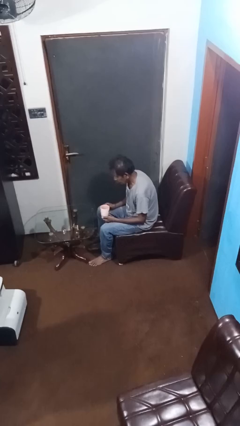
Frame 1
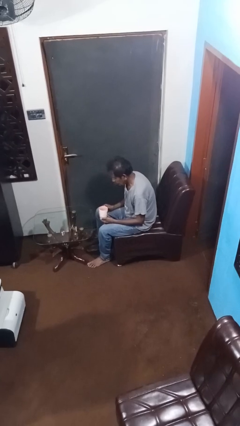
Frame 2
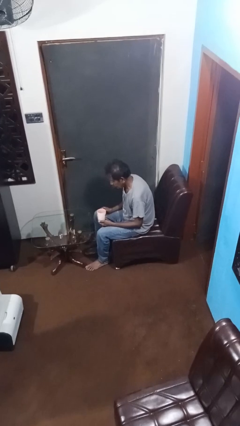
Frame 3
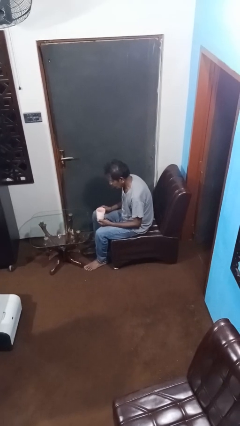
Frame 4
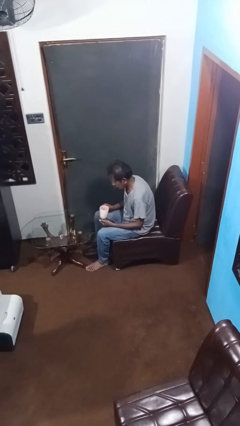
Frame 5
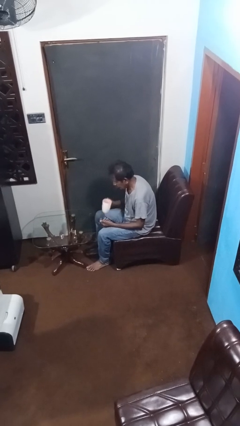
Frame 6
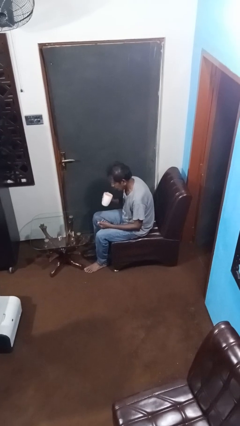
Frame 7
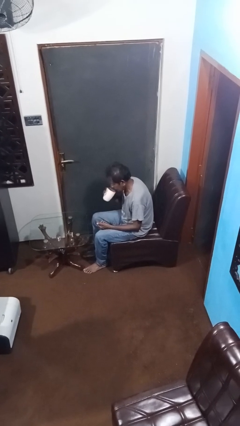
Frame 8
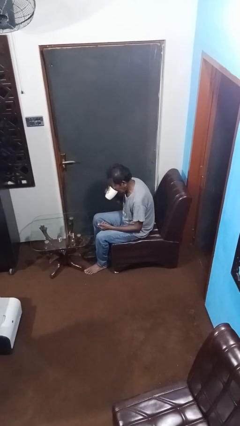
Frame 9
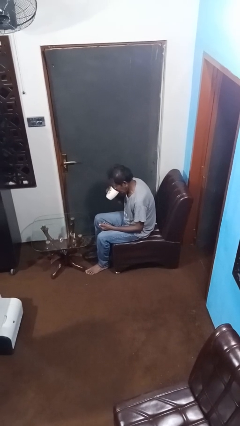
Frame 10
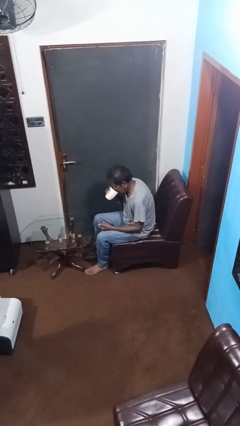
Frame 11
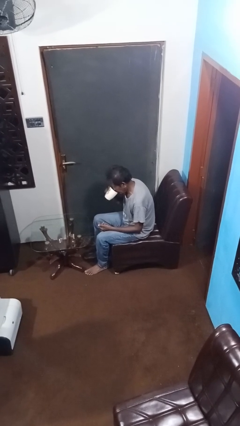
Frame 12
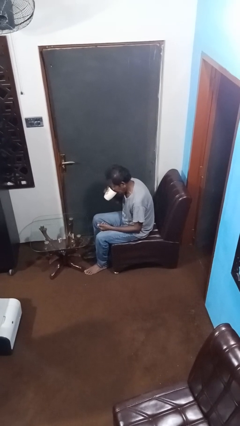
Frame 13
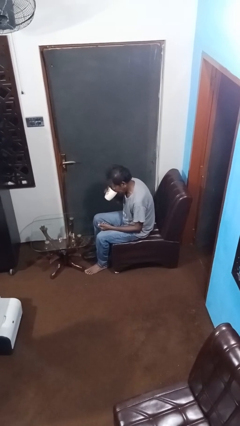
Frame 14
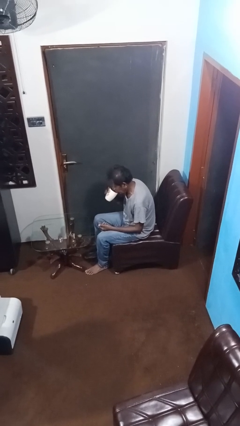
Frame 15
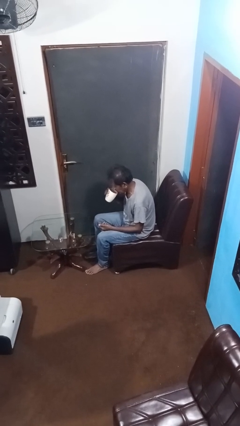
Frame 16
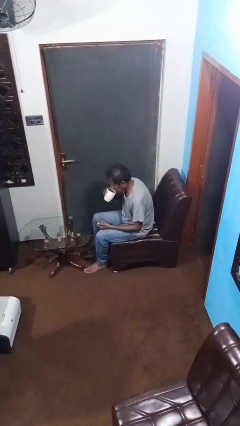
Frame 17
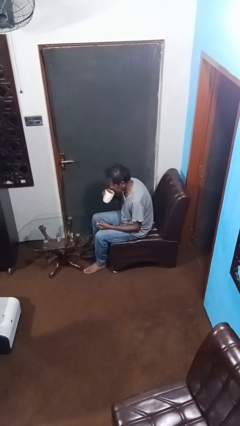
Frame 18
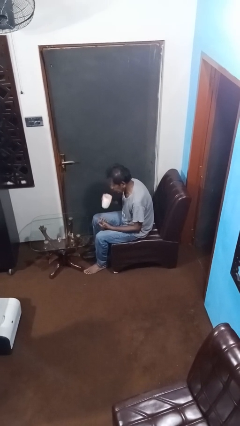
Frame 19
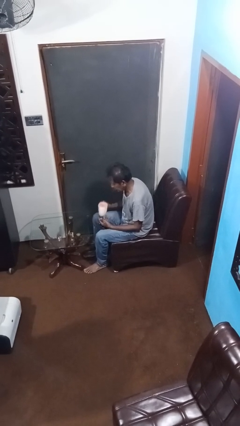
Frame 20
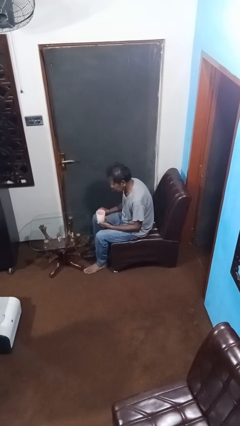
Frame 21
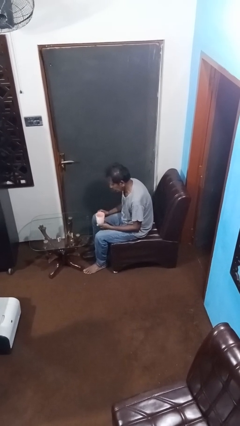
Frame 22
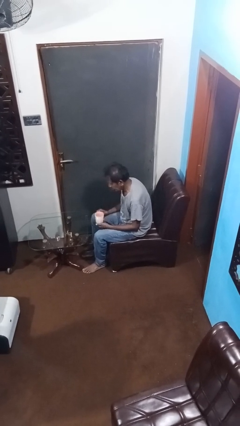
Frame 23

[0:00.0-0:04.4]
person drinks from mug

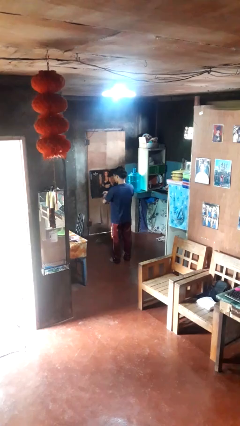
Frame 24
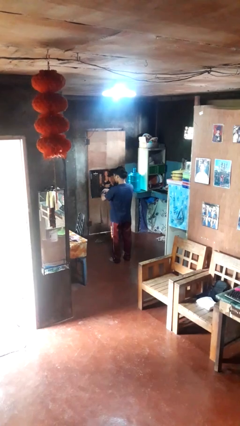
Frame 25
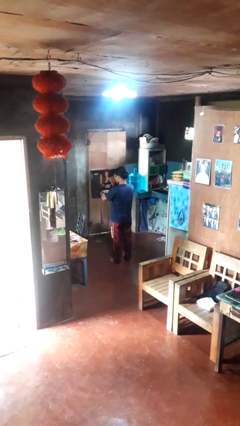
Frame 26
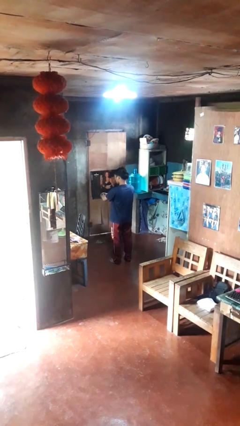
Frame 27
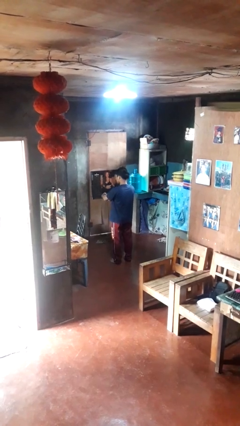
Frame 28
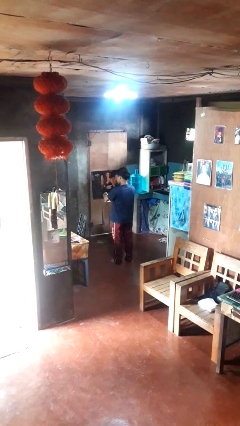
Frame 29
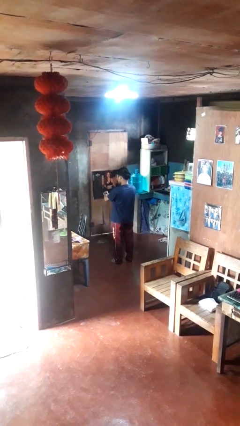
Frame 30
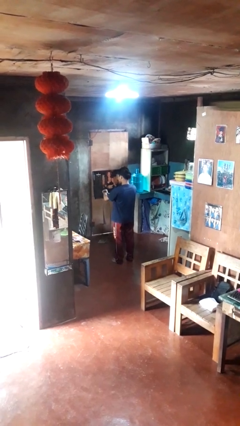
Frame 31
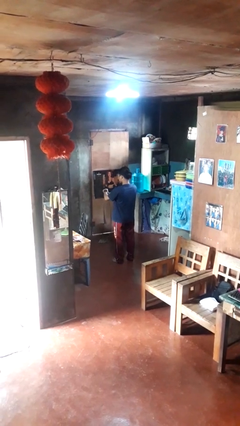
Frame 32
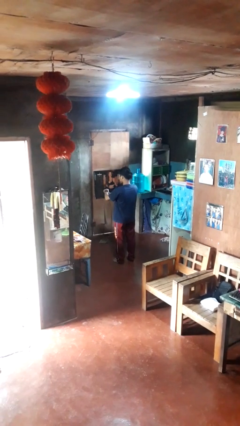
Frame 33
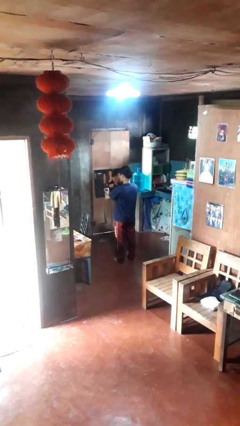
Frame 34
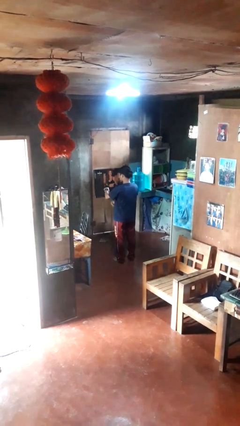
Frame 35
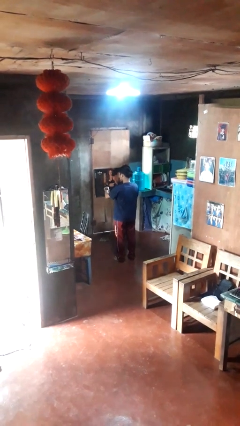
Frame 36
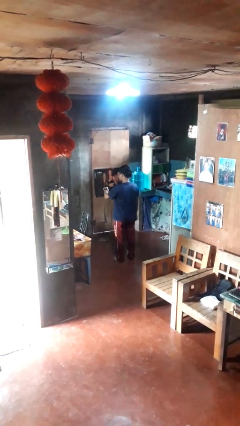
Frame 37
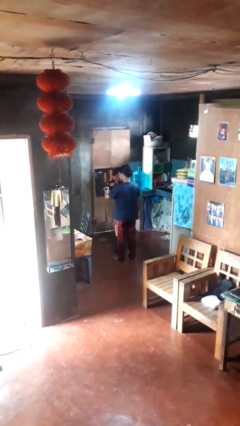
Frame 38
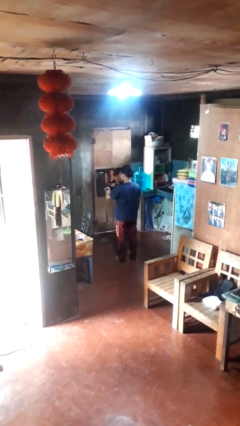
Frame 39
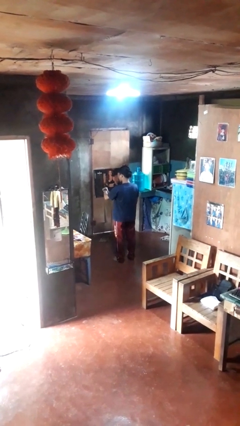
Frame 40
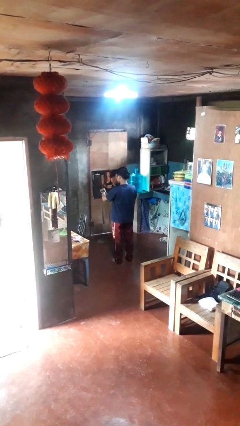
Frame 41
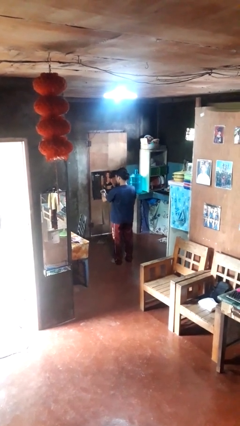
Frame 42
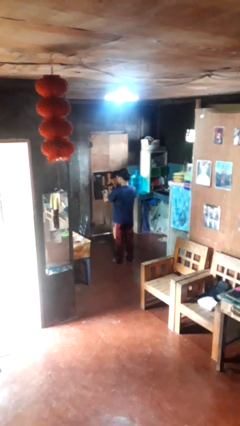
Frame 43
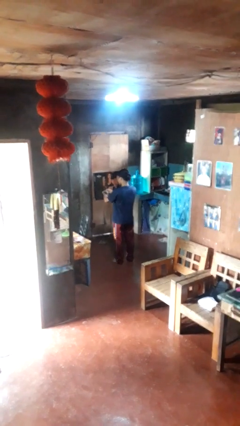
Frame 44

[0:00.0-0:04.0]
person puts on wristwatch

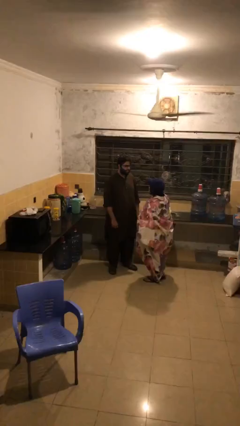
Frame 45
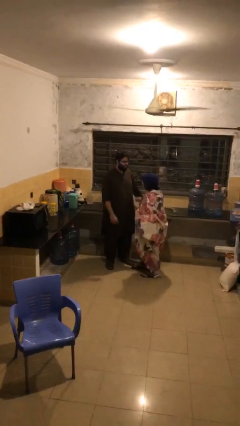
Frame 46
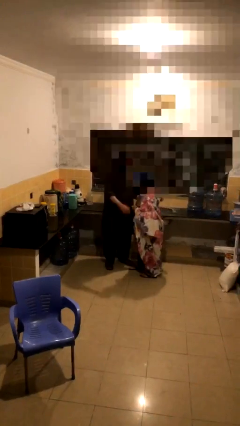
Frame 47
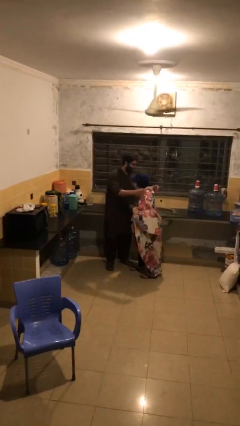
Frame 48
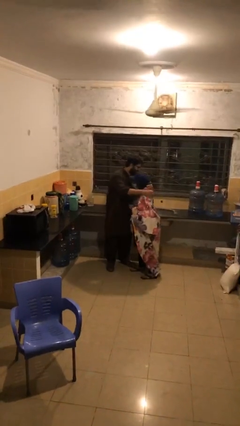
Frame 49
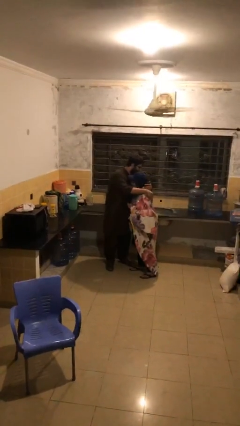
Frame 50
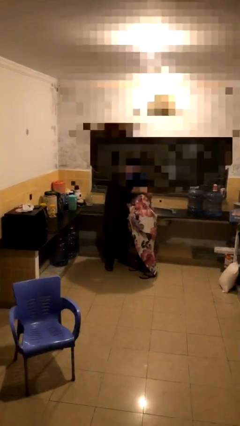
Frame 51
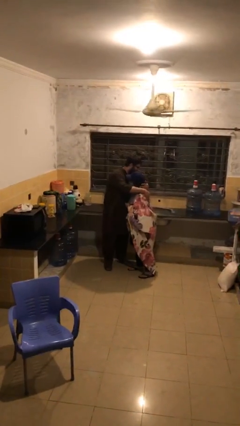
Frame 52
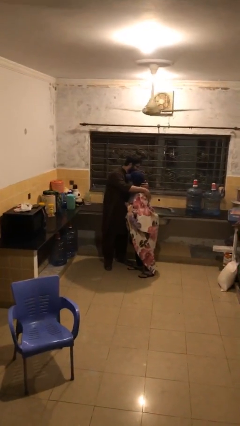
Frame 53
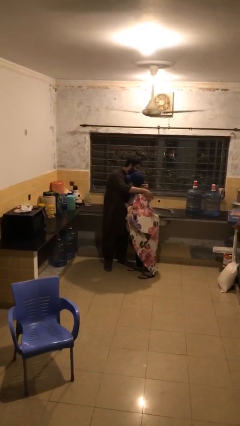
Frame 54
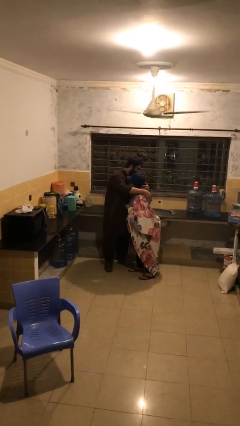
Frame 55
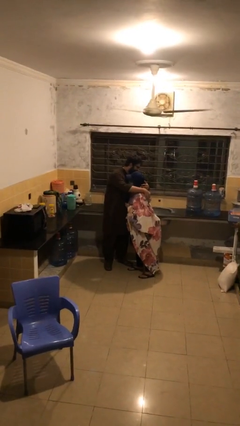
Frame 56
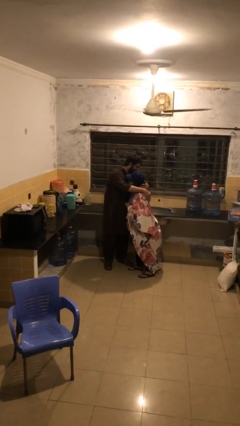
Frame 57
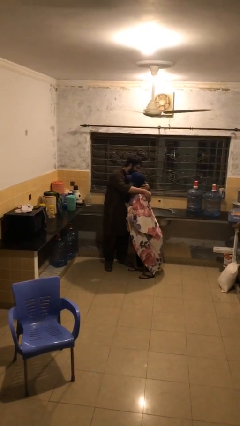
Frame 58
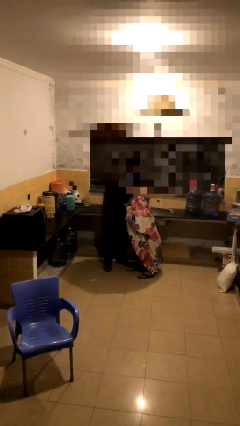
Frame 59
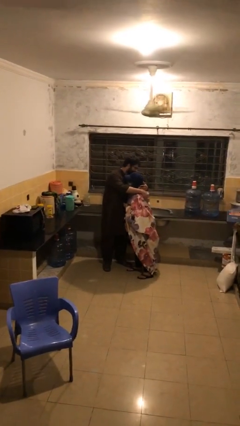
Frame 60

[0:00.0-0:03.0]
person embraces person

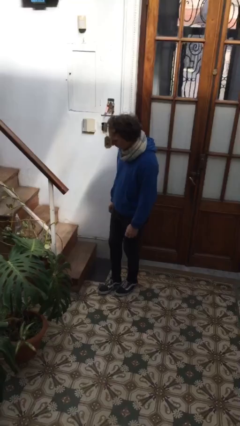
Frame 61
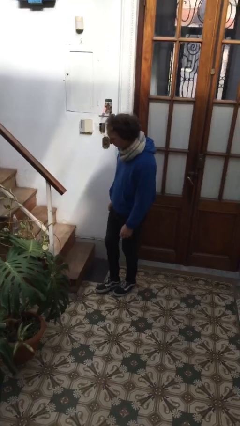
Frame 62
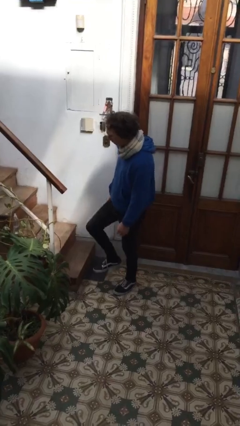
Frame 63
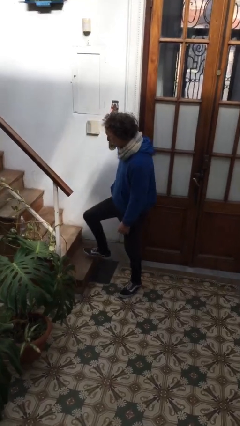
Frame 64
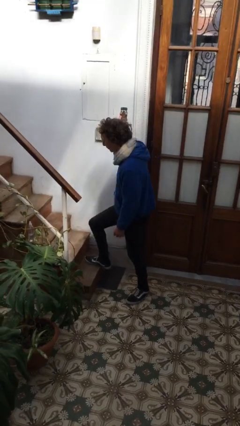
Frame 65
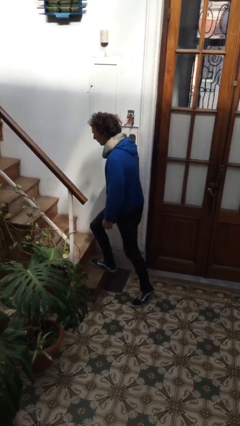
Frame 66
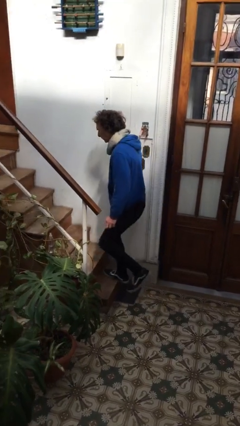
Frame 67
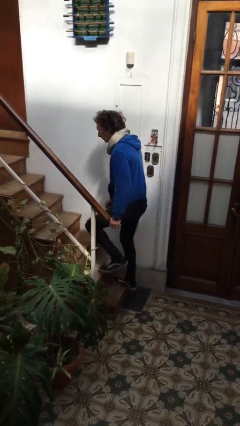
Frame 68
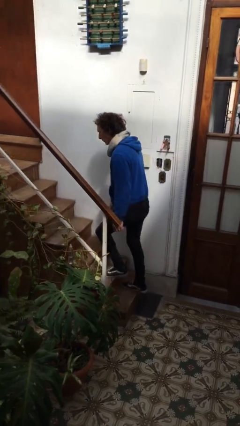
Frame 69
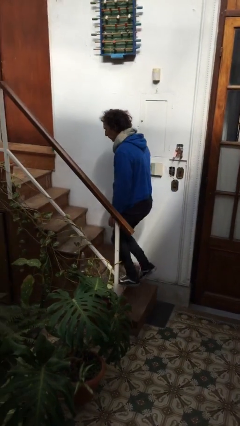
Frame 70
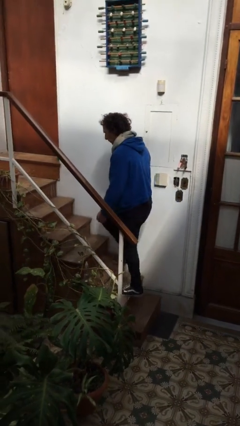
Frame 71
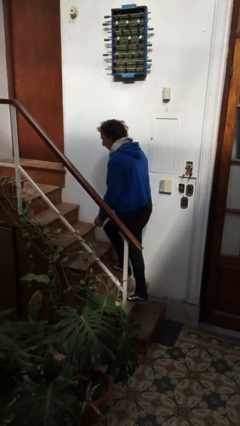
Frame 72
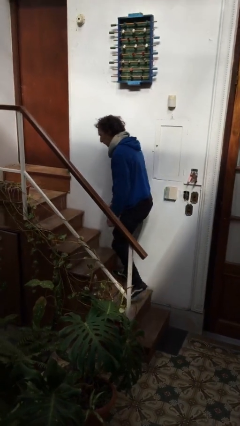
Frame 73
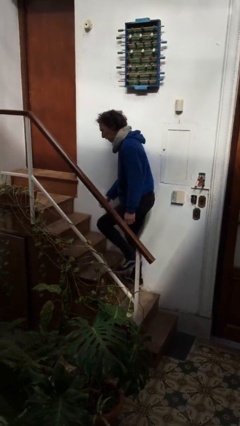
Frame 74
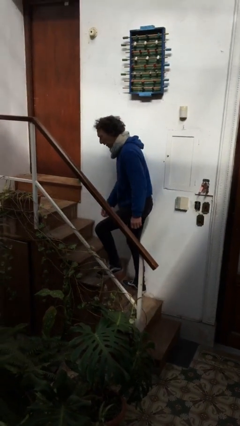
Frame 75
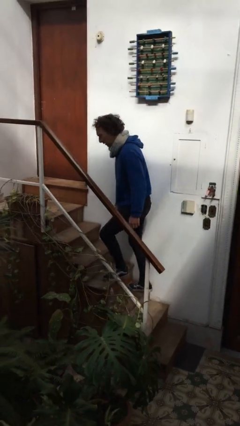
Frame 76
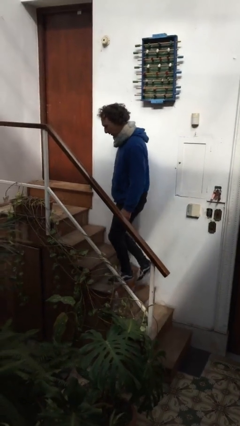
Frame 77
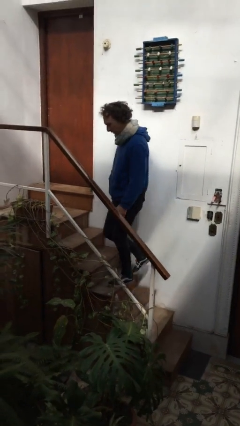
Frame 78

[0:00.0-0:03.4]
person climbs up stairs

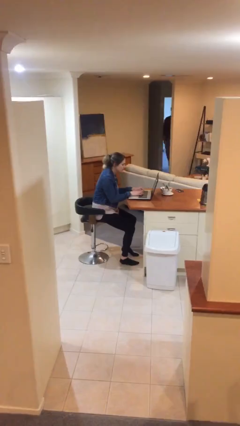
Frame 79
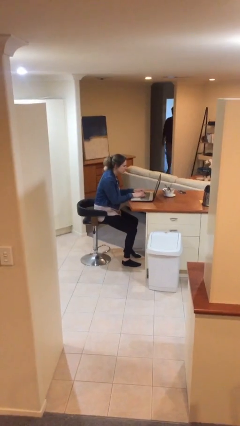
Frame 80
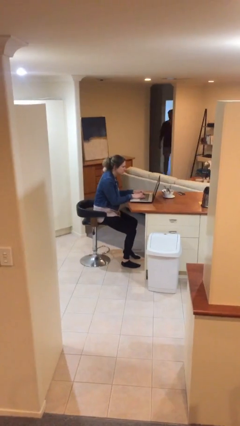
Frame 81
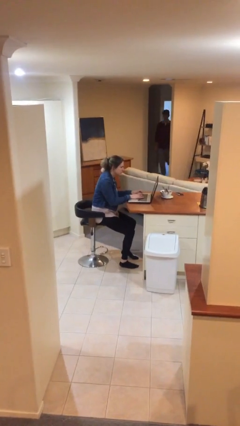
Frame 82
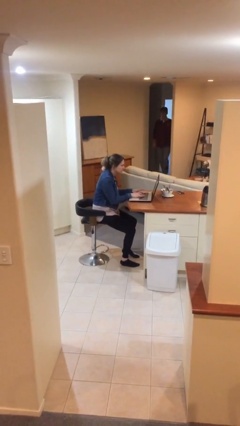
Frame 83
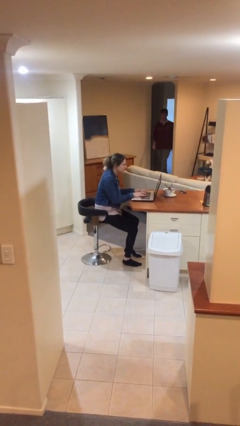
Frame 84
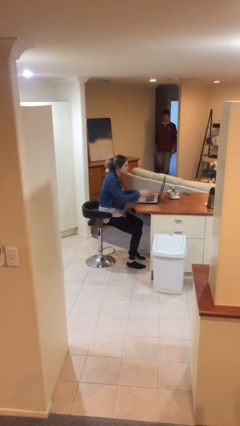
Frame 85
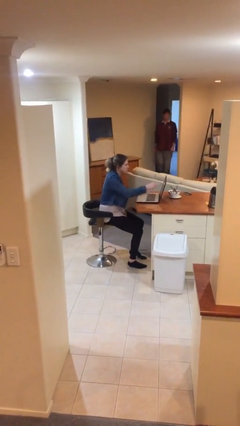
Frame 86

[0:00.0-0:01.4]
person interacts with laptop

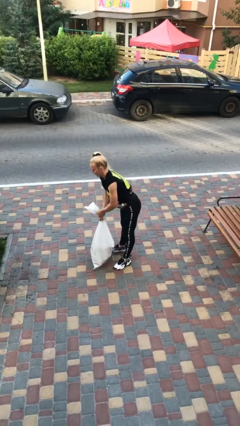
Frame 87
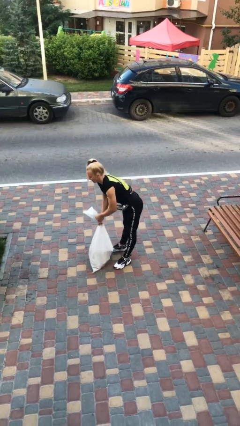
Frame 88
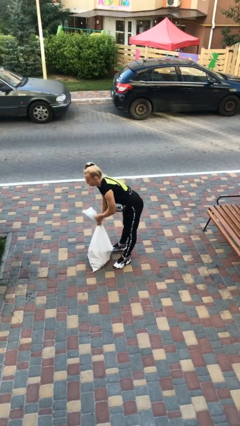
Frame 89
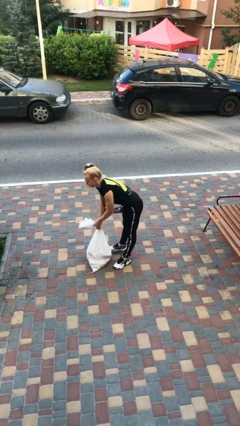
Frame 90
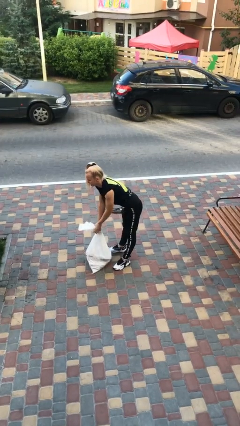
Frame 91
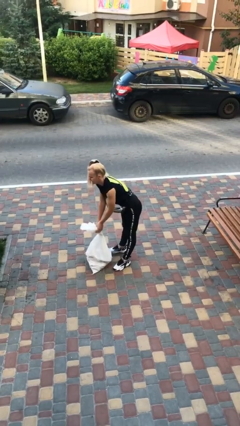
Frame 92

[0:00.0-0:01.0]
person puts down object on floor

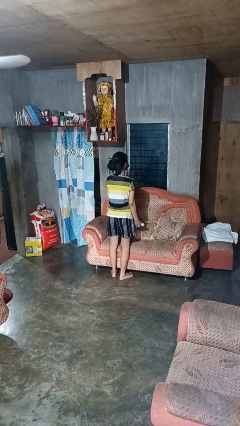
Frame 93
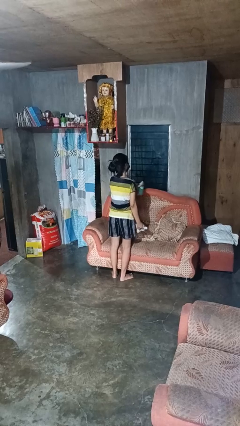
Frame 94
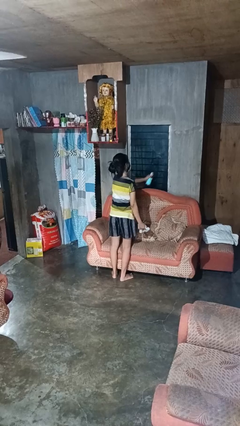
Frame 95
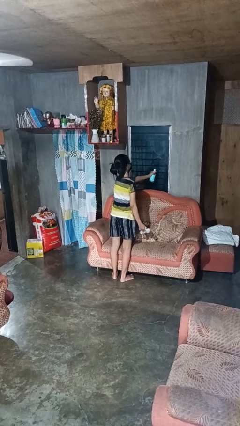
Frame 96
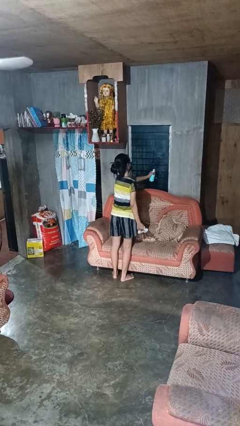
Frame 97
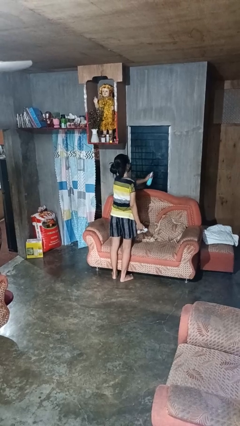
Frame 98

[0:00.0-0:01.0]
person sprays from bottle
